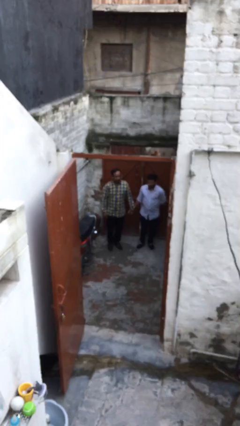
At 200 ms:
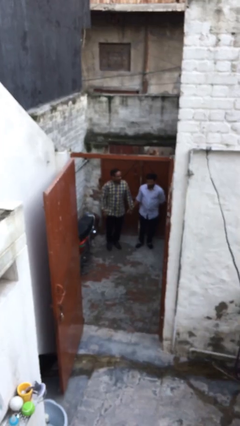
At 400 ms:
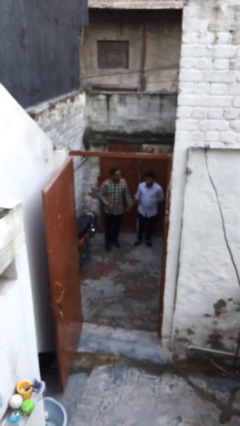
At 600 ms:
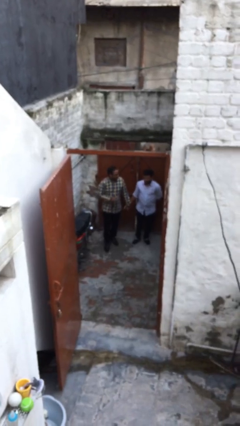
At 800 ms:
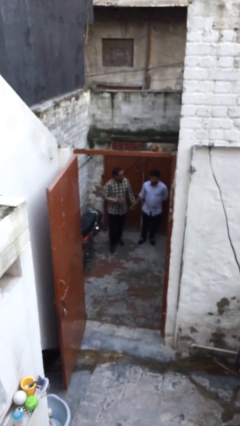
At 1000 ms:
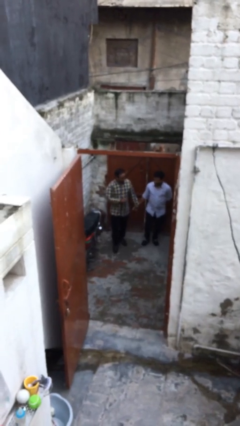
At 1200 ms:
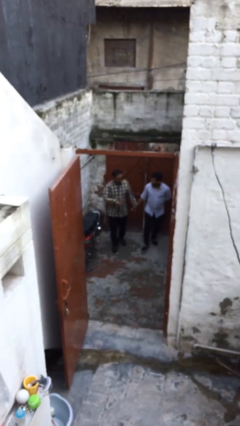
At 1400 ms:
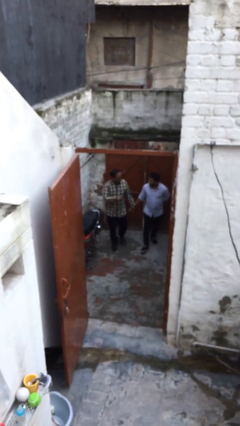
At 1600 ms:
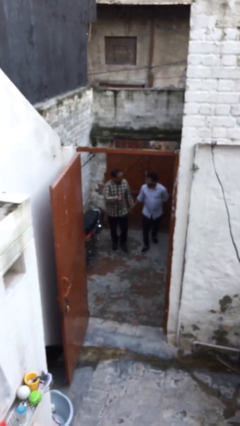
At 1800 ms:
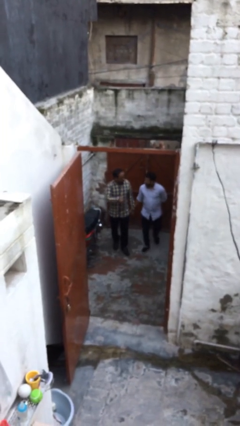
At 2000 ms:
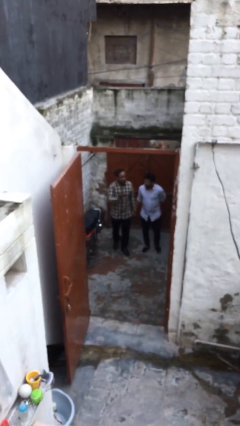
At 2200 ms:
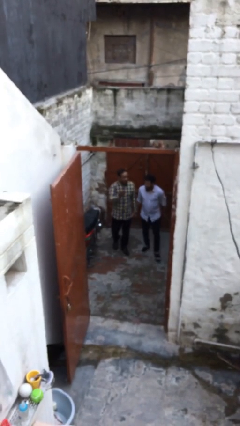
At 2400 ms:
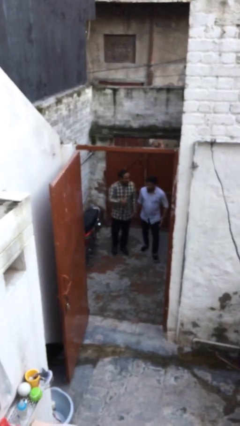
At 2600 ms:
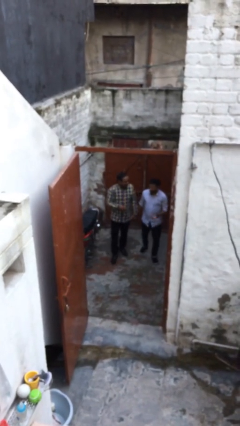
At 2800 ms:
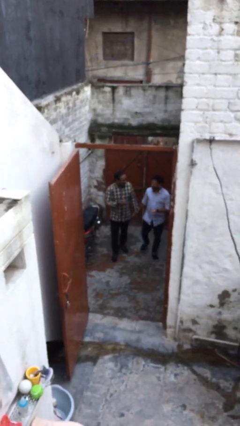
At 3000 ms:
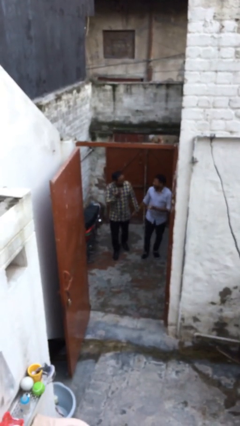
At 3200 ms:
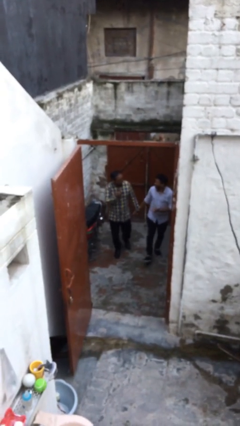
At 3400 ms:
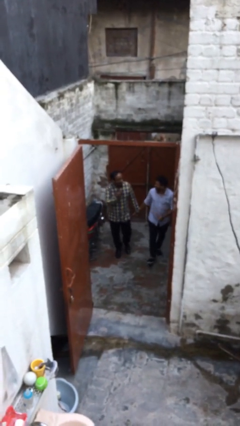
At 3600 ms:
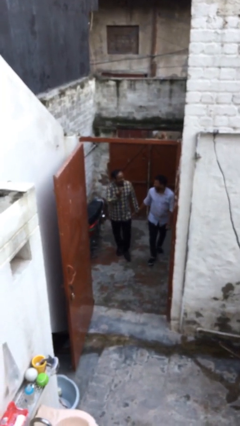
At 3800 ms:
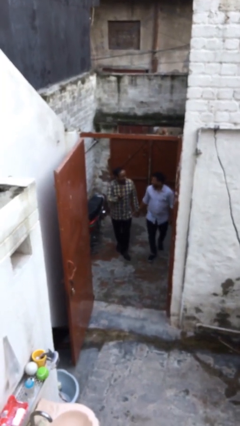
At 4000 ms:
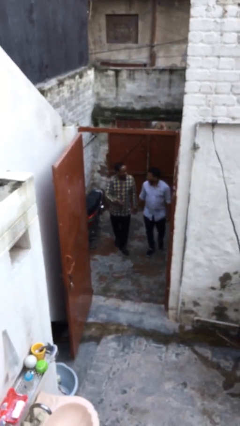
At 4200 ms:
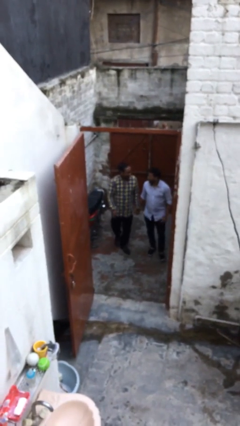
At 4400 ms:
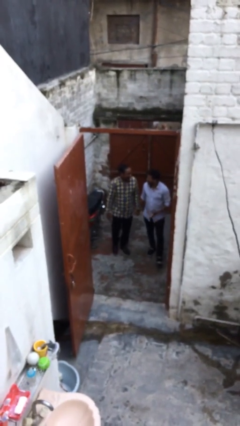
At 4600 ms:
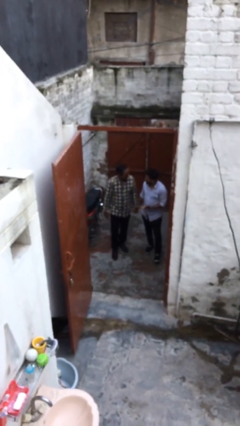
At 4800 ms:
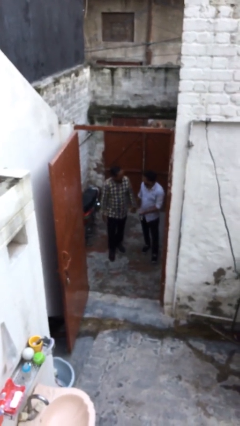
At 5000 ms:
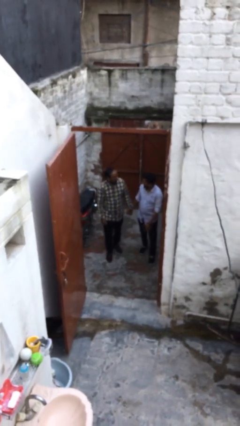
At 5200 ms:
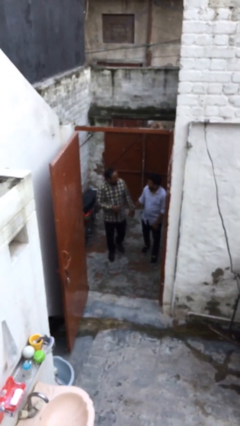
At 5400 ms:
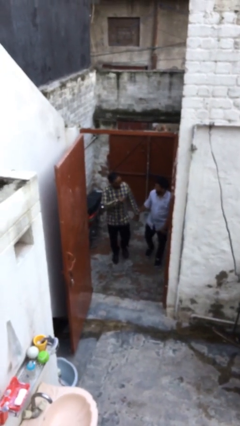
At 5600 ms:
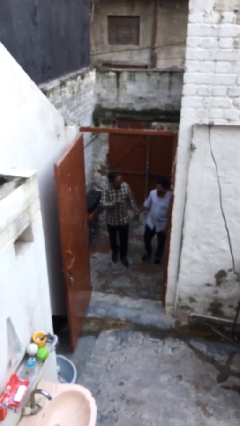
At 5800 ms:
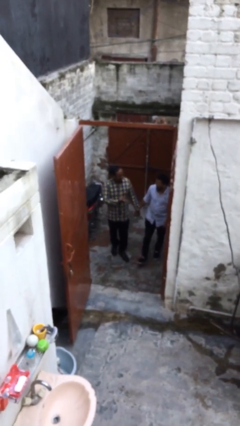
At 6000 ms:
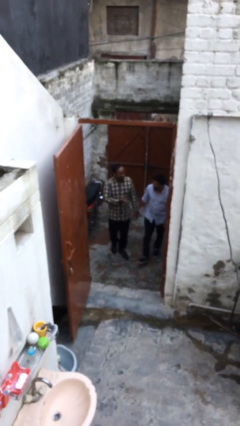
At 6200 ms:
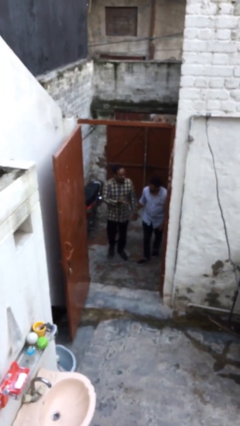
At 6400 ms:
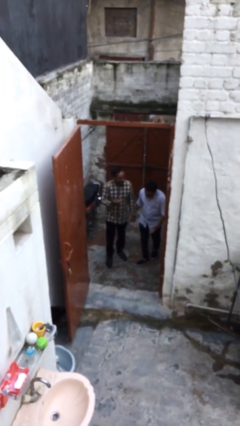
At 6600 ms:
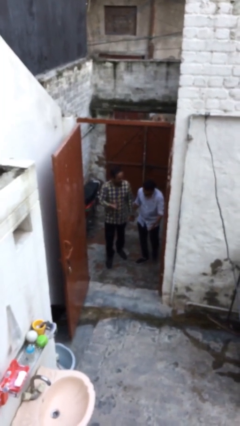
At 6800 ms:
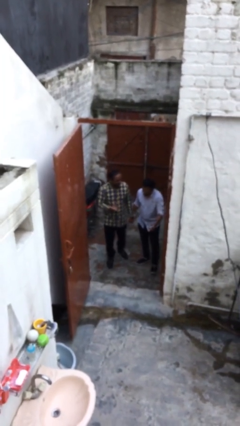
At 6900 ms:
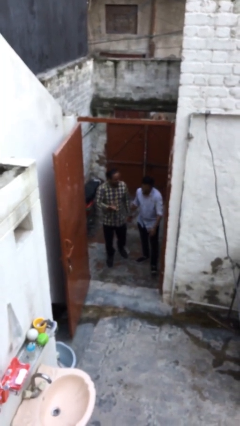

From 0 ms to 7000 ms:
person holds hand

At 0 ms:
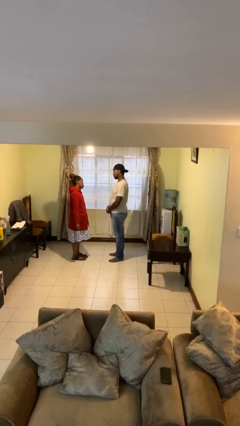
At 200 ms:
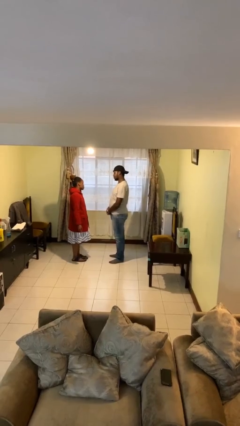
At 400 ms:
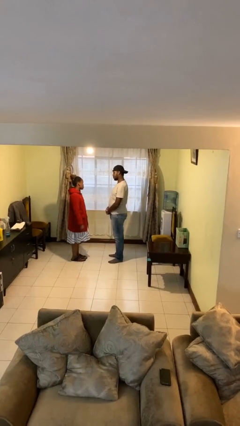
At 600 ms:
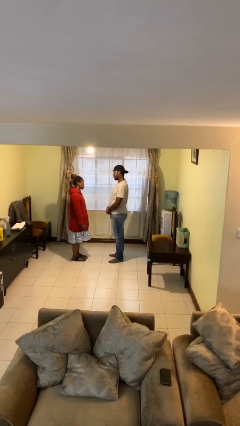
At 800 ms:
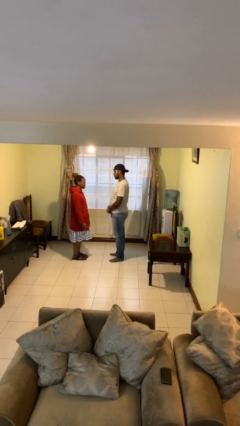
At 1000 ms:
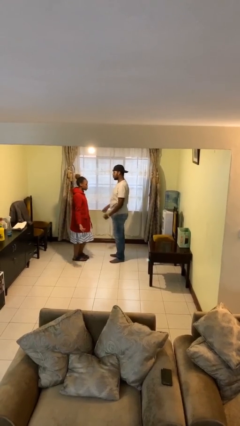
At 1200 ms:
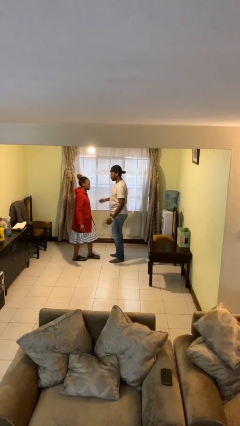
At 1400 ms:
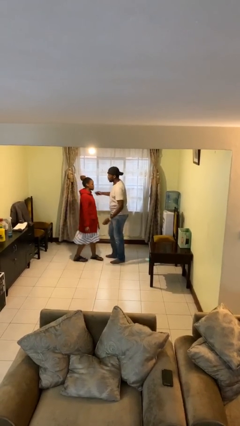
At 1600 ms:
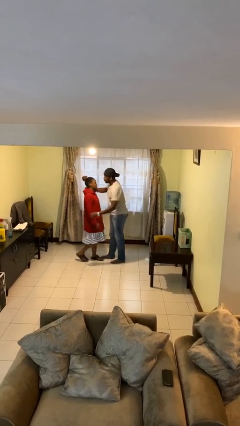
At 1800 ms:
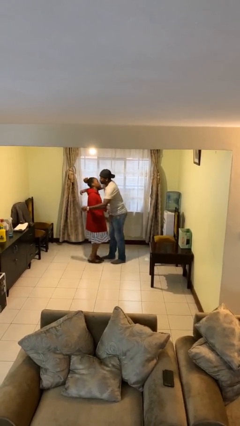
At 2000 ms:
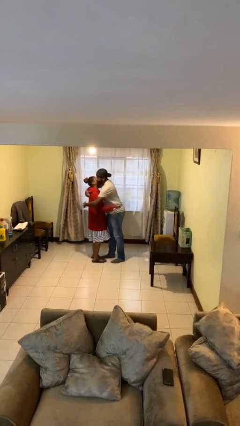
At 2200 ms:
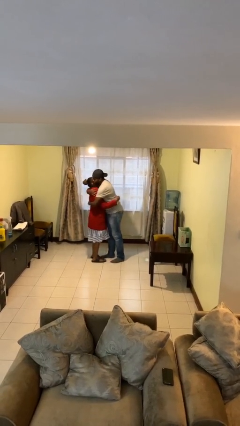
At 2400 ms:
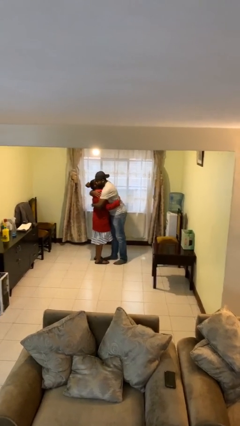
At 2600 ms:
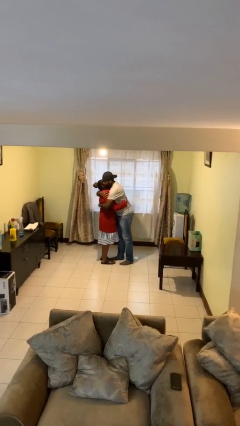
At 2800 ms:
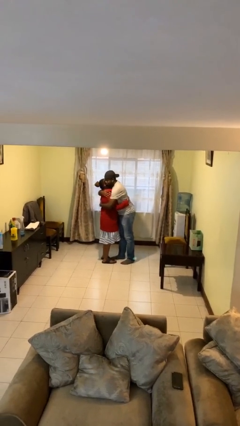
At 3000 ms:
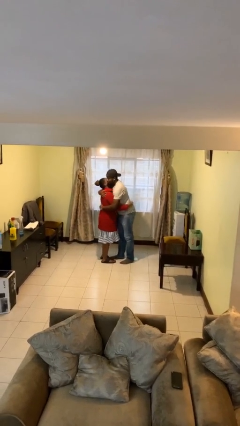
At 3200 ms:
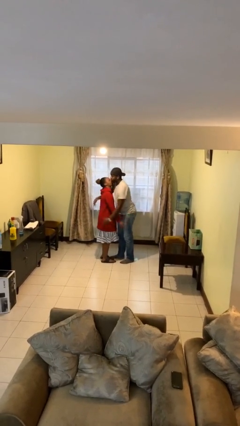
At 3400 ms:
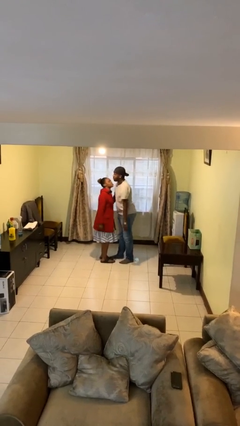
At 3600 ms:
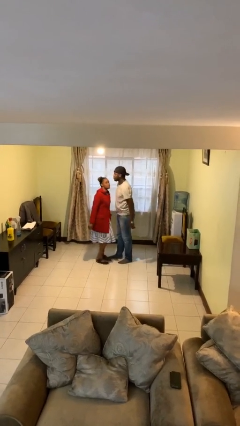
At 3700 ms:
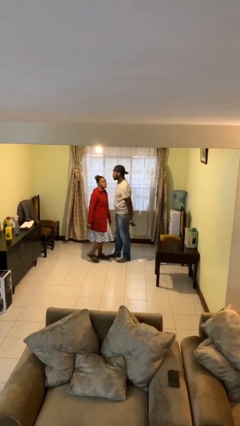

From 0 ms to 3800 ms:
person embraces person

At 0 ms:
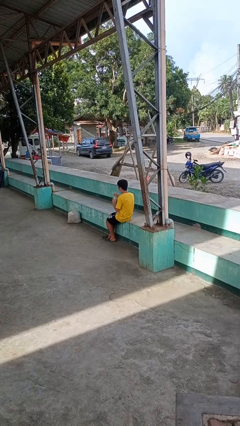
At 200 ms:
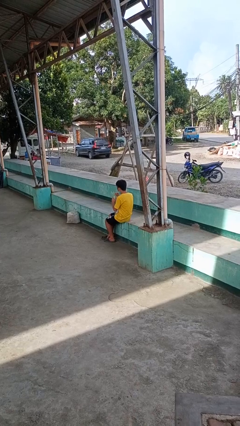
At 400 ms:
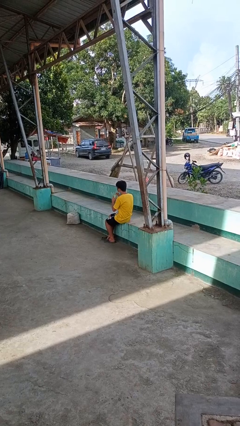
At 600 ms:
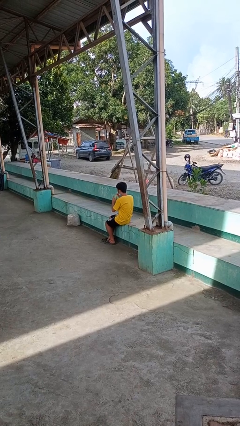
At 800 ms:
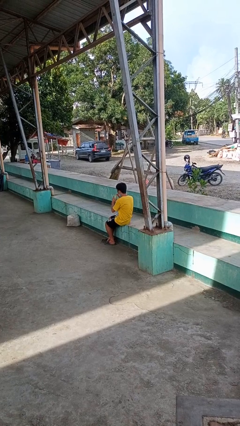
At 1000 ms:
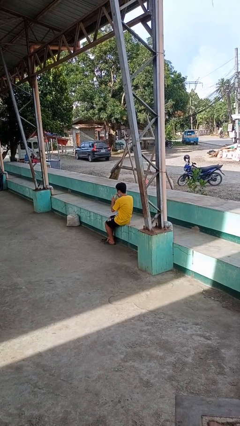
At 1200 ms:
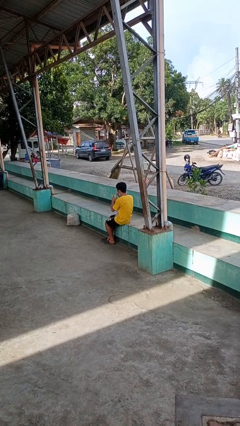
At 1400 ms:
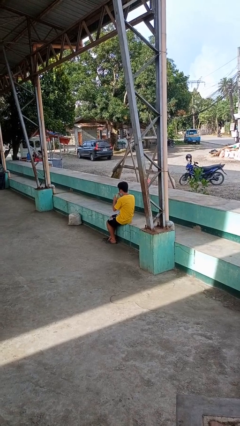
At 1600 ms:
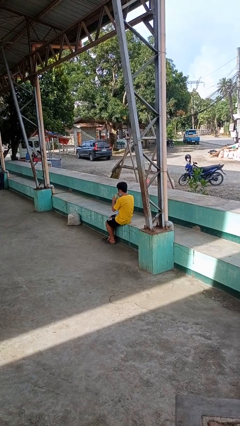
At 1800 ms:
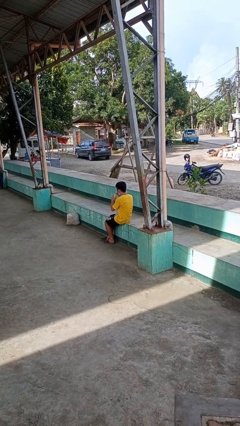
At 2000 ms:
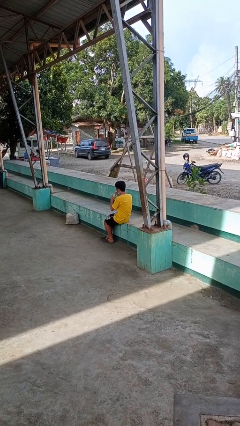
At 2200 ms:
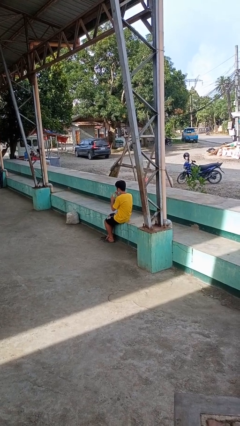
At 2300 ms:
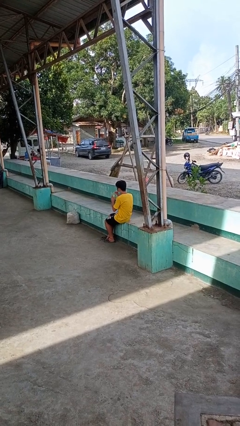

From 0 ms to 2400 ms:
person drinks from straw

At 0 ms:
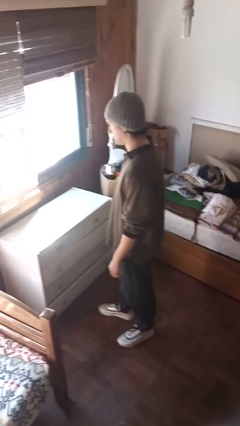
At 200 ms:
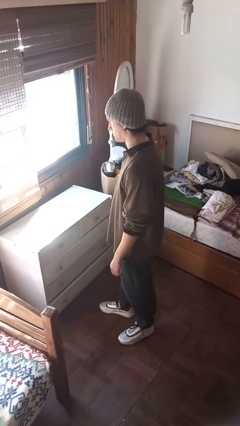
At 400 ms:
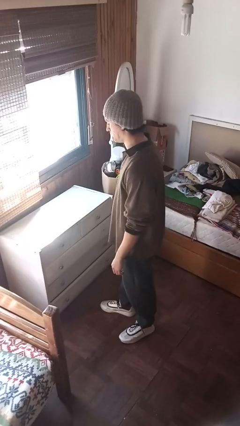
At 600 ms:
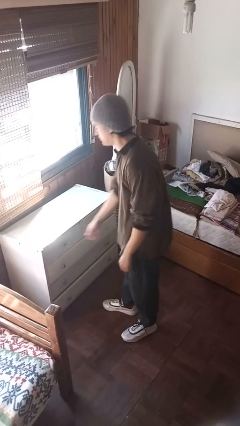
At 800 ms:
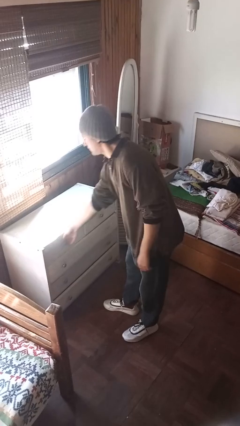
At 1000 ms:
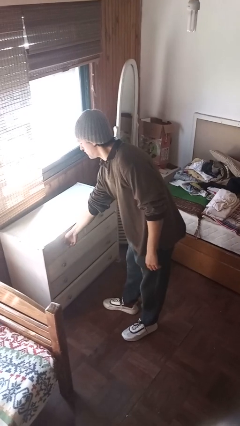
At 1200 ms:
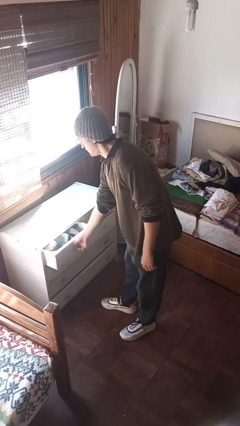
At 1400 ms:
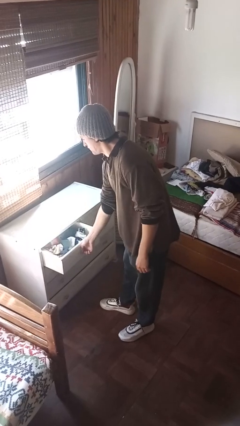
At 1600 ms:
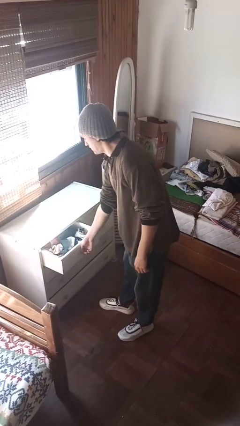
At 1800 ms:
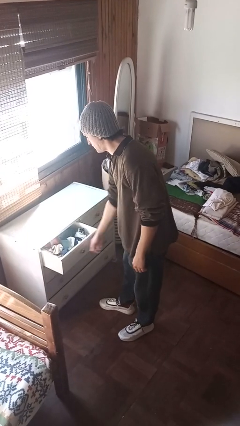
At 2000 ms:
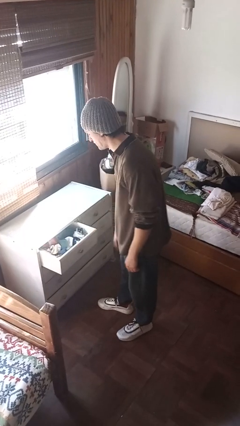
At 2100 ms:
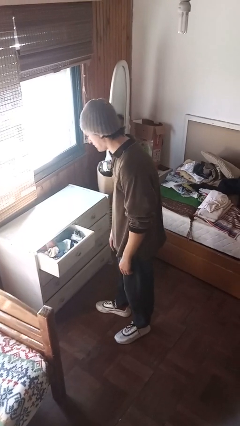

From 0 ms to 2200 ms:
person opens dresser drawer

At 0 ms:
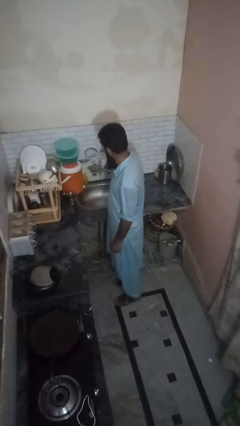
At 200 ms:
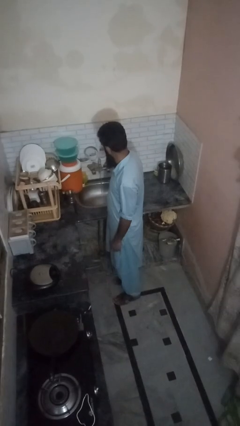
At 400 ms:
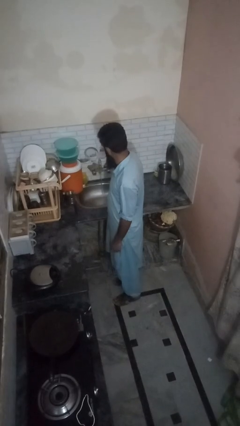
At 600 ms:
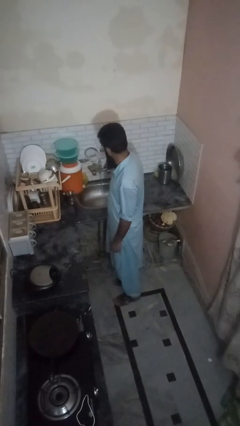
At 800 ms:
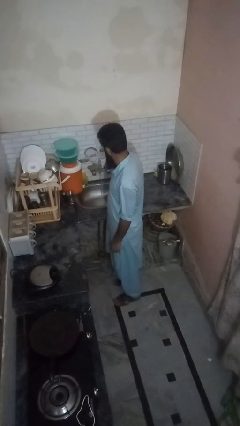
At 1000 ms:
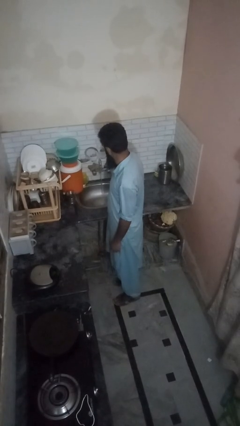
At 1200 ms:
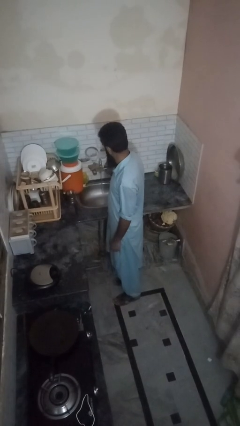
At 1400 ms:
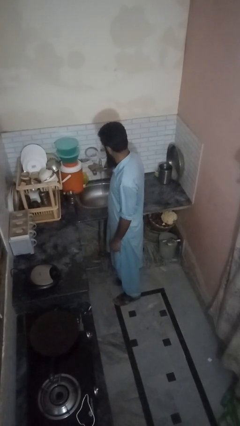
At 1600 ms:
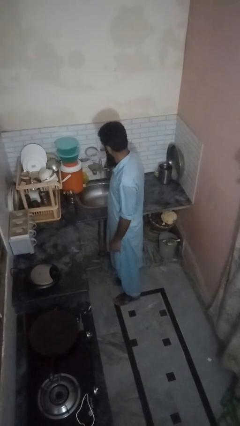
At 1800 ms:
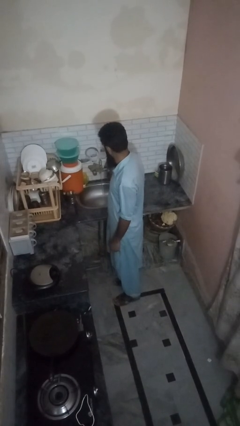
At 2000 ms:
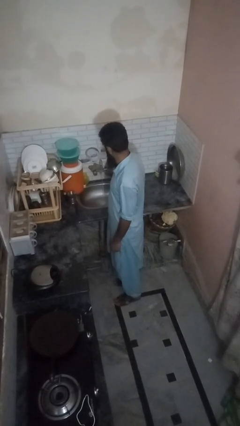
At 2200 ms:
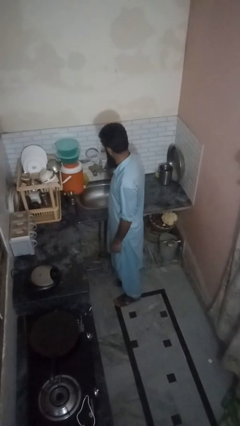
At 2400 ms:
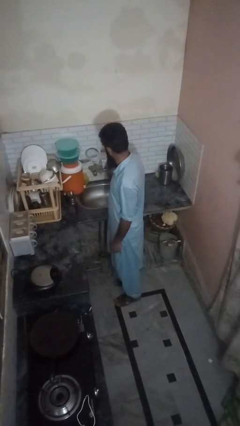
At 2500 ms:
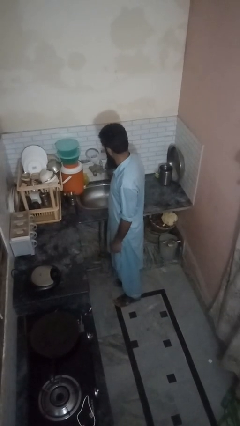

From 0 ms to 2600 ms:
person turns off faucet
